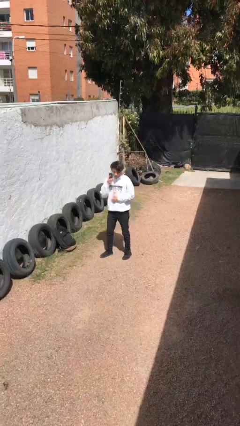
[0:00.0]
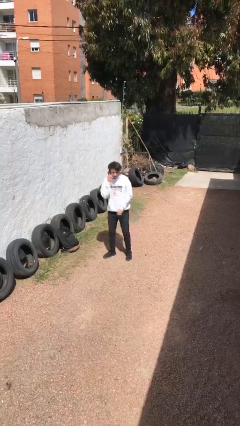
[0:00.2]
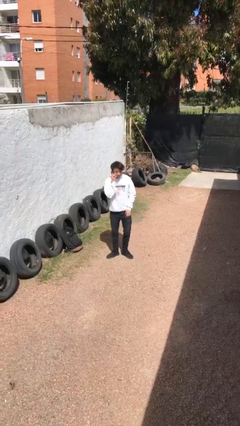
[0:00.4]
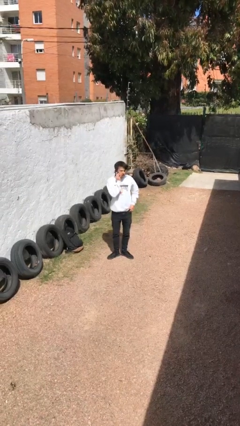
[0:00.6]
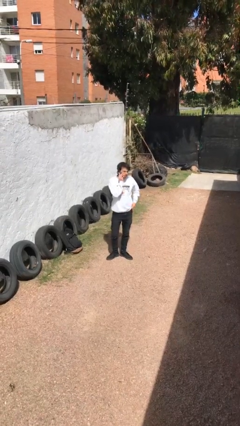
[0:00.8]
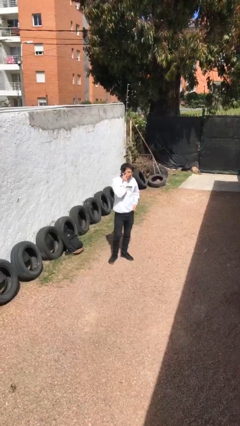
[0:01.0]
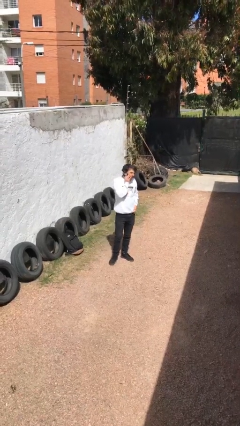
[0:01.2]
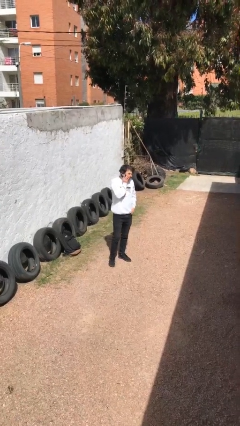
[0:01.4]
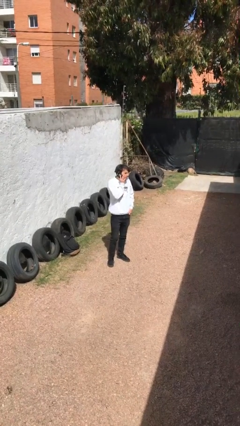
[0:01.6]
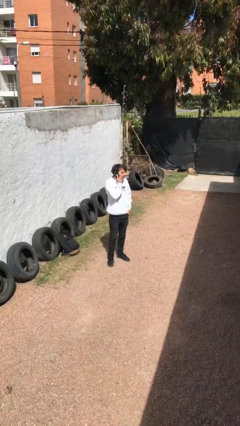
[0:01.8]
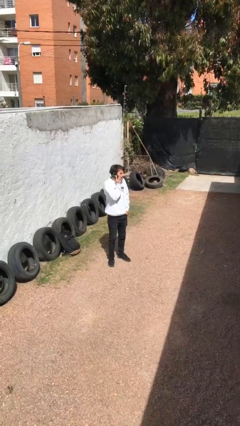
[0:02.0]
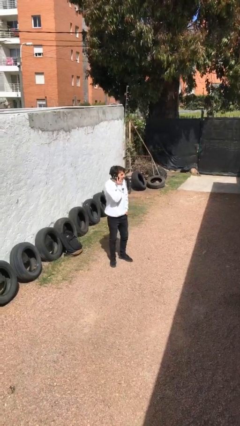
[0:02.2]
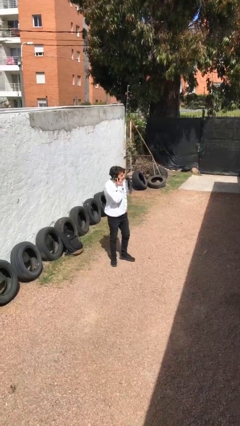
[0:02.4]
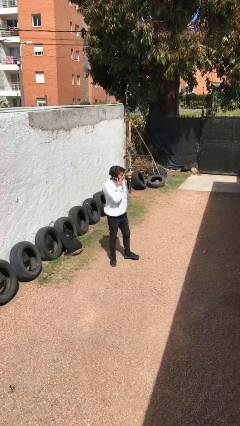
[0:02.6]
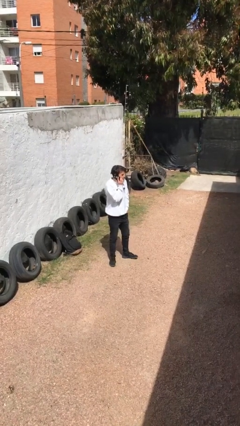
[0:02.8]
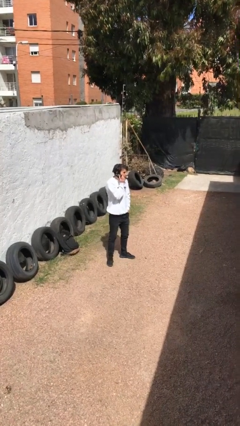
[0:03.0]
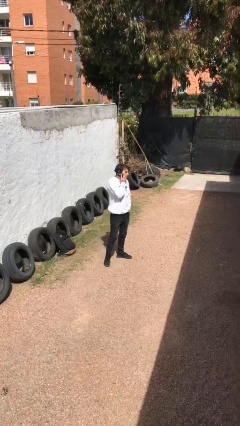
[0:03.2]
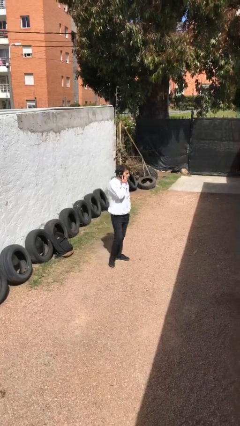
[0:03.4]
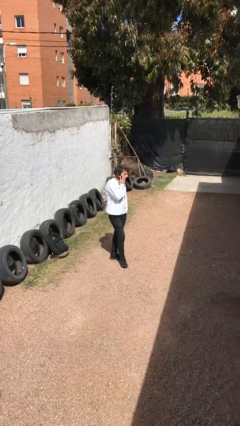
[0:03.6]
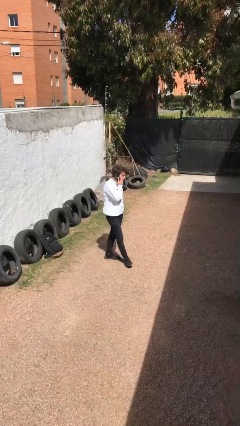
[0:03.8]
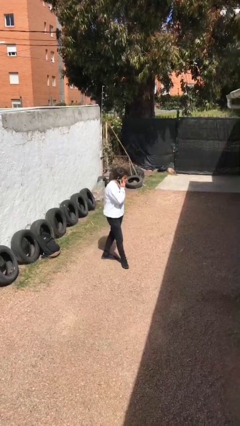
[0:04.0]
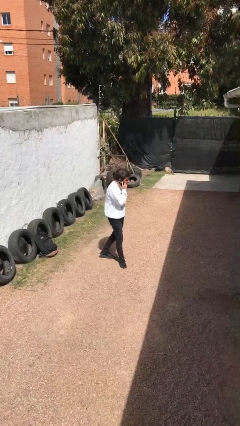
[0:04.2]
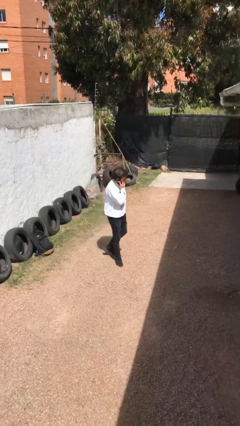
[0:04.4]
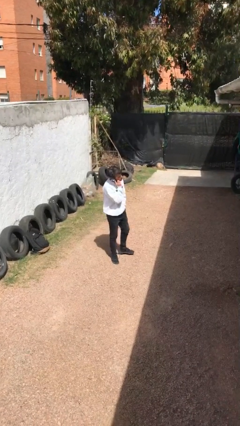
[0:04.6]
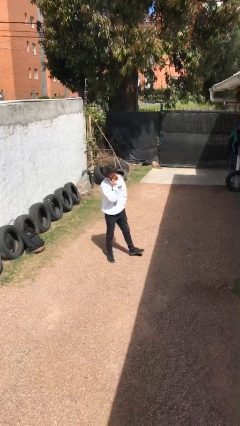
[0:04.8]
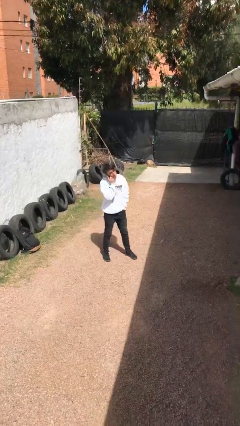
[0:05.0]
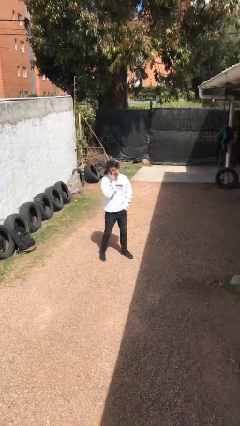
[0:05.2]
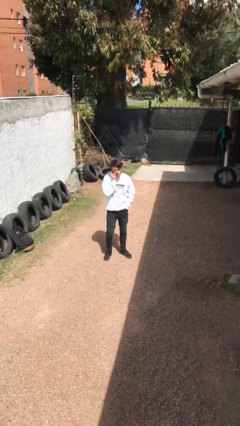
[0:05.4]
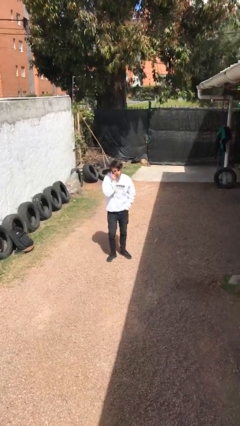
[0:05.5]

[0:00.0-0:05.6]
person talks on phone

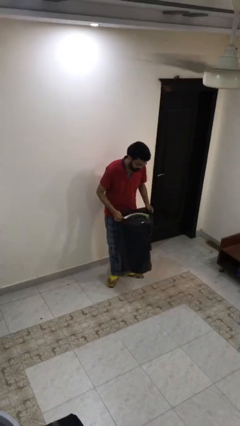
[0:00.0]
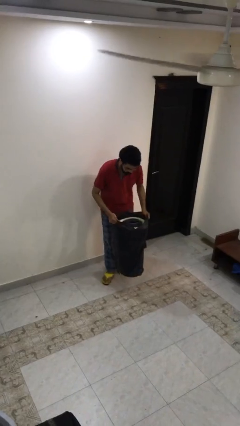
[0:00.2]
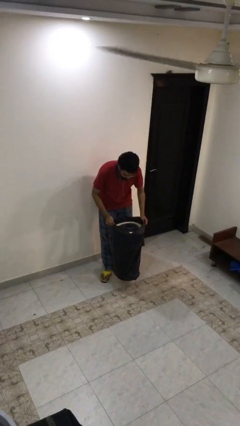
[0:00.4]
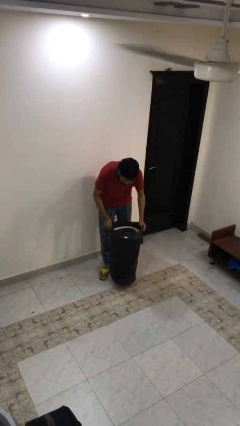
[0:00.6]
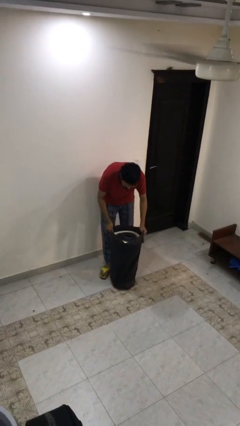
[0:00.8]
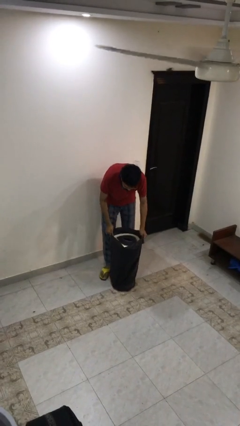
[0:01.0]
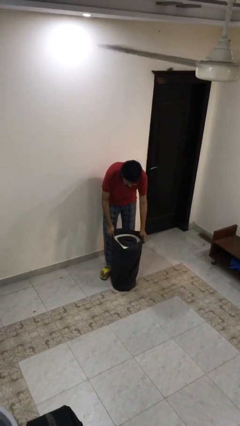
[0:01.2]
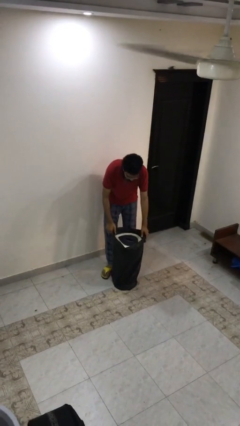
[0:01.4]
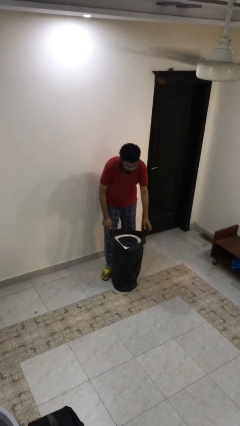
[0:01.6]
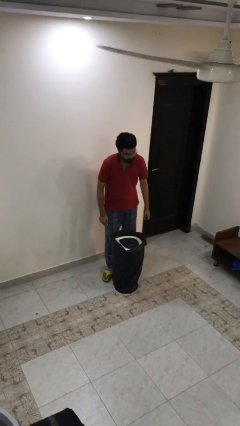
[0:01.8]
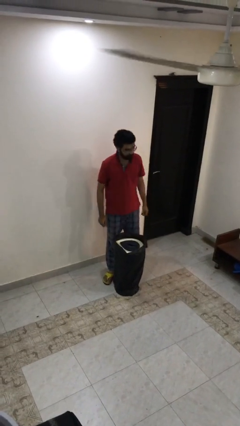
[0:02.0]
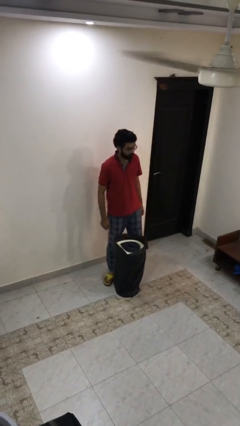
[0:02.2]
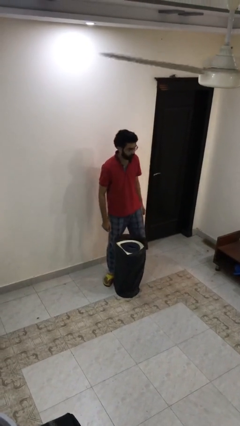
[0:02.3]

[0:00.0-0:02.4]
person puts down object on floor

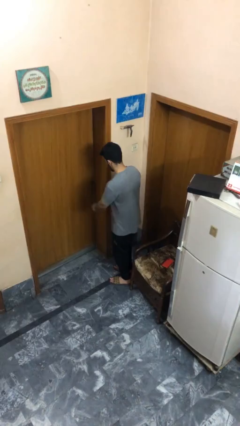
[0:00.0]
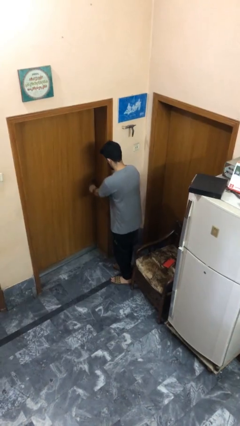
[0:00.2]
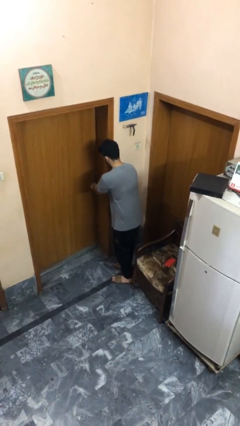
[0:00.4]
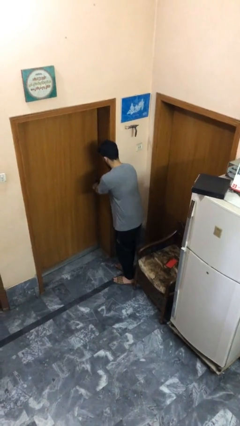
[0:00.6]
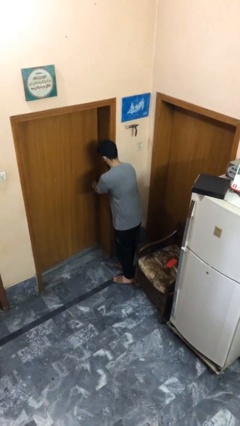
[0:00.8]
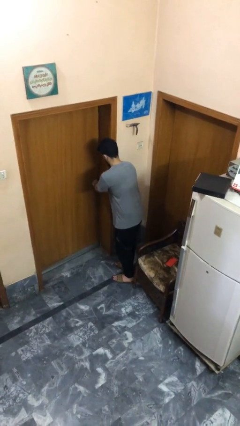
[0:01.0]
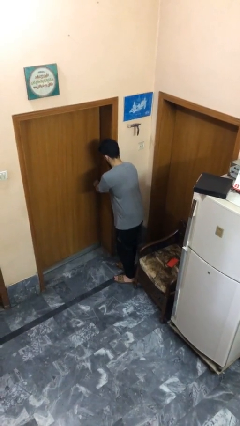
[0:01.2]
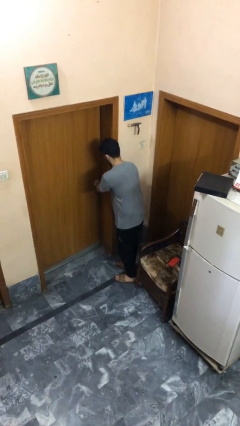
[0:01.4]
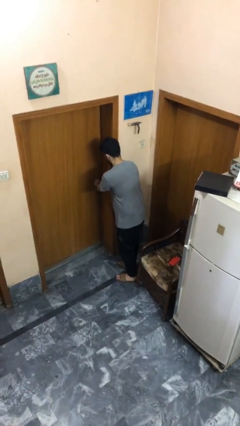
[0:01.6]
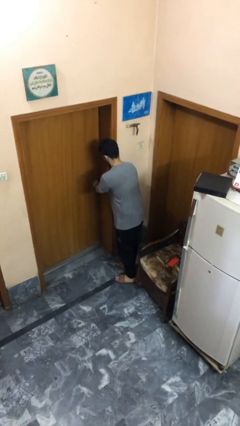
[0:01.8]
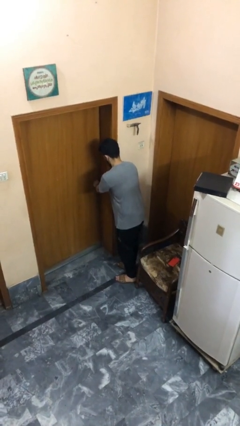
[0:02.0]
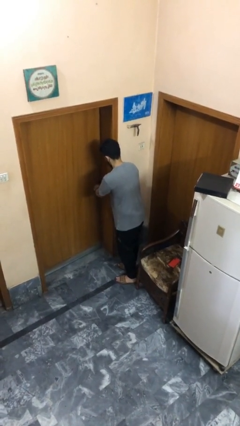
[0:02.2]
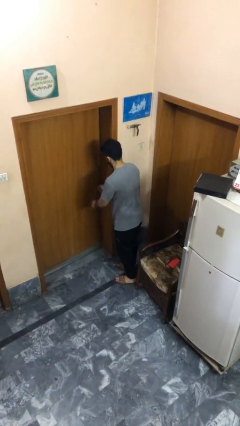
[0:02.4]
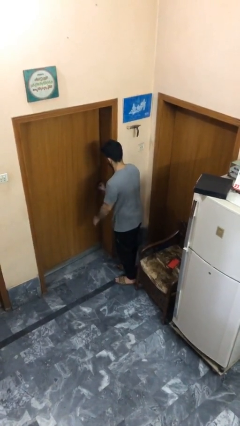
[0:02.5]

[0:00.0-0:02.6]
person unlocks door with keys

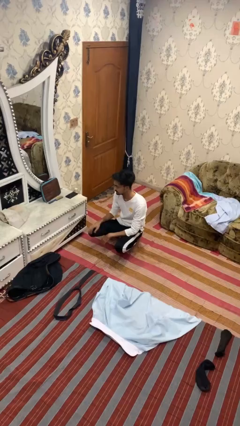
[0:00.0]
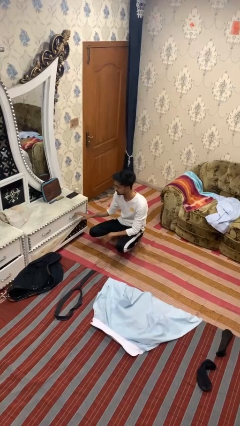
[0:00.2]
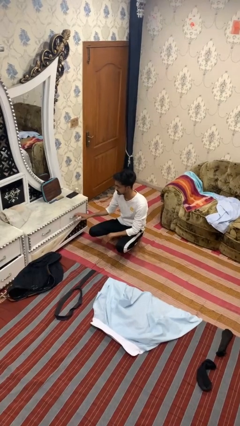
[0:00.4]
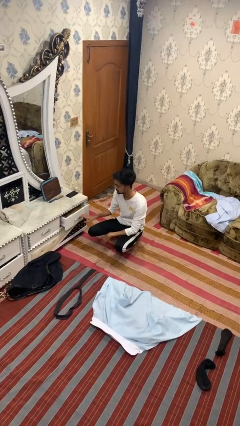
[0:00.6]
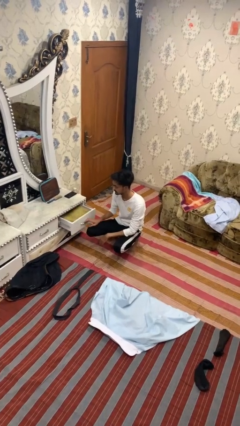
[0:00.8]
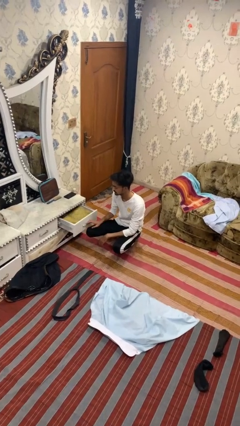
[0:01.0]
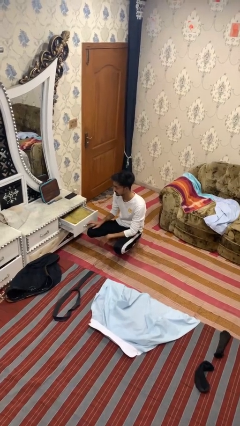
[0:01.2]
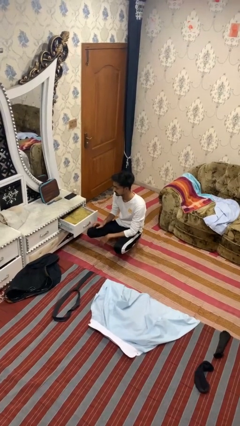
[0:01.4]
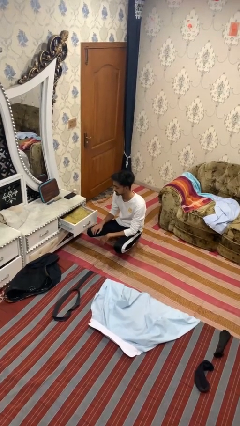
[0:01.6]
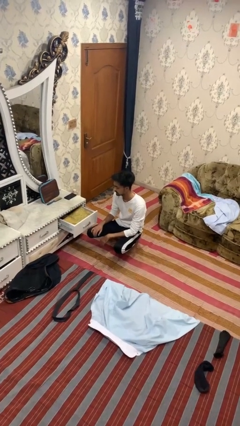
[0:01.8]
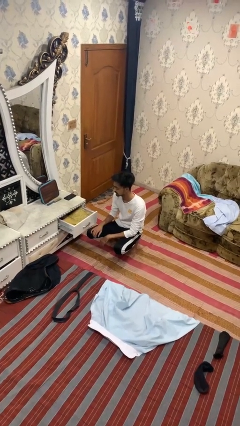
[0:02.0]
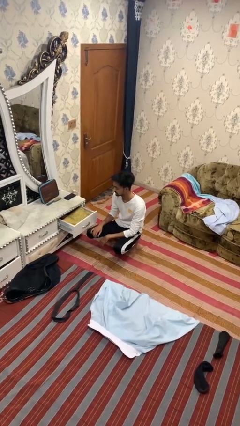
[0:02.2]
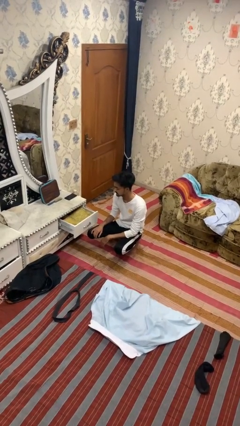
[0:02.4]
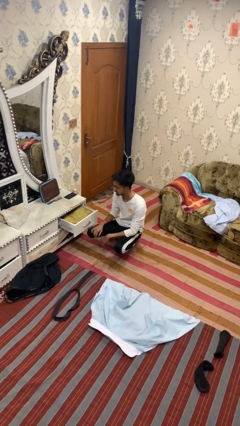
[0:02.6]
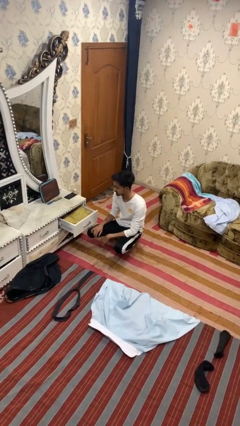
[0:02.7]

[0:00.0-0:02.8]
person opens dresser drawer

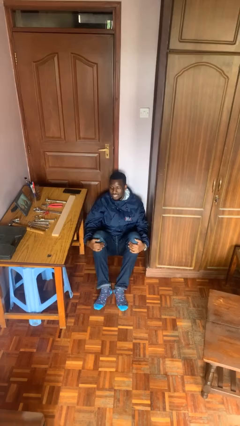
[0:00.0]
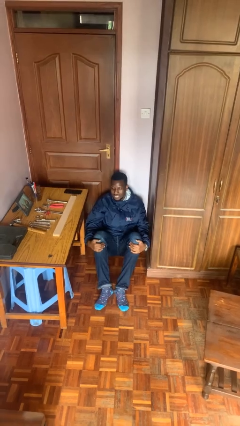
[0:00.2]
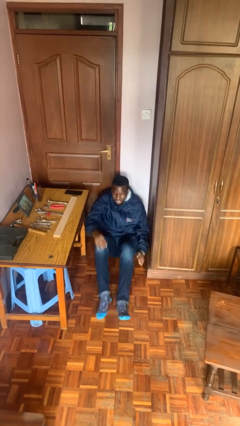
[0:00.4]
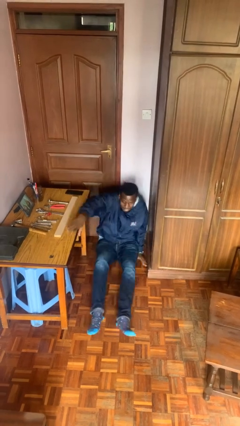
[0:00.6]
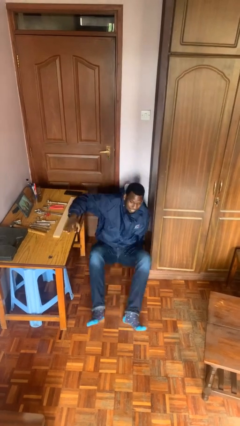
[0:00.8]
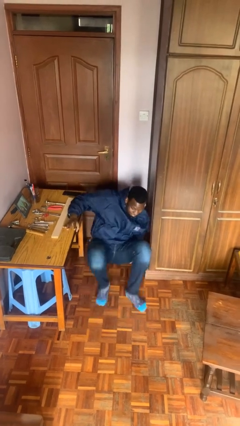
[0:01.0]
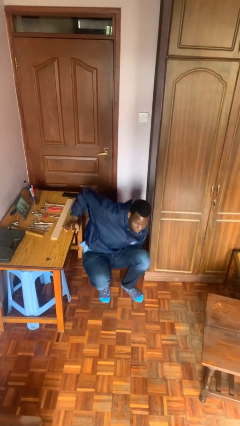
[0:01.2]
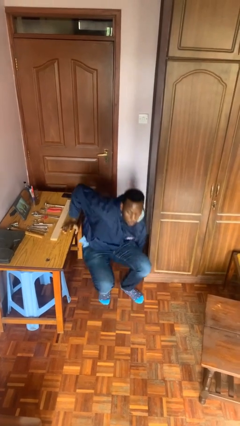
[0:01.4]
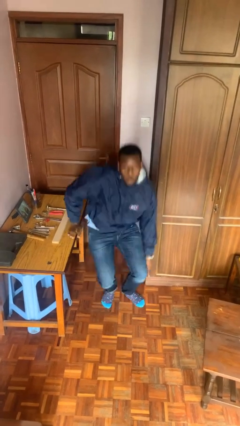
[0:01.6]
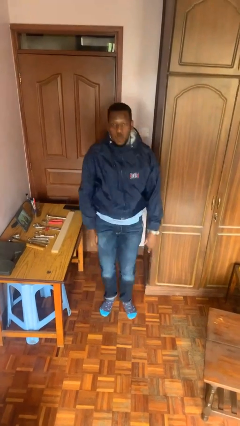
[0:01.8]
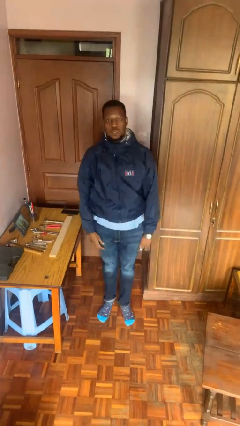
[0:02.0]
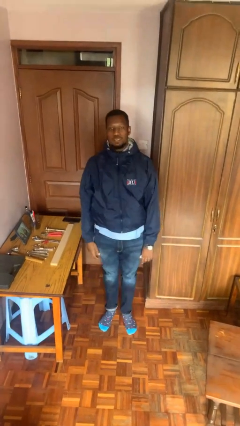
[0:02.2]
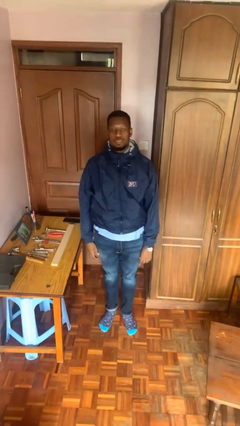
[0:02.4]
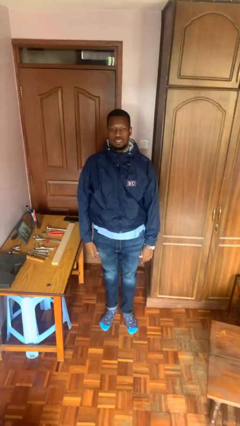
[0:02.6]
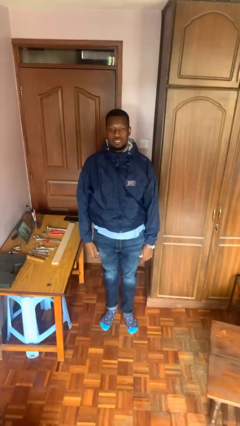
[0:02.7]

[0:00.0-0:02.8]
person stands up

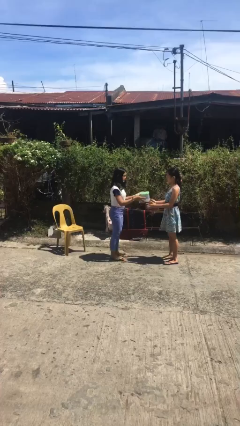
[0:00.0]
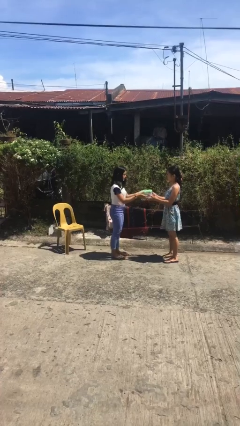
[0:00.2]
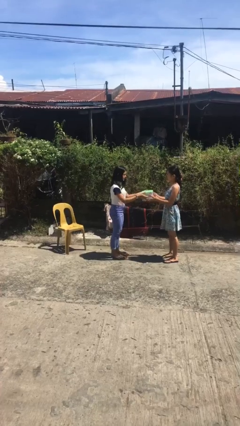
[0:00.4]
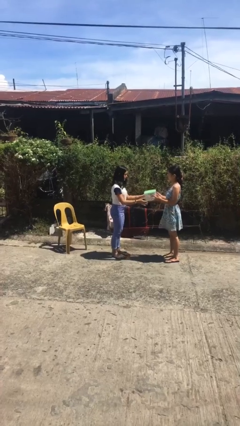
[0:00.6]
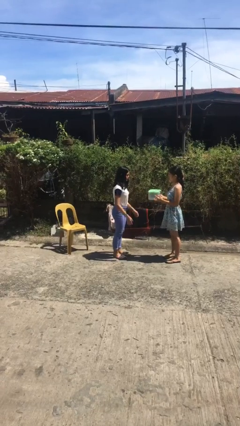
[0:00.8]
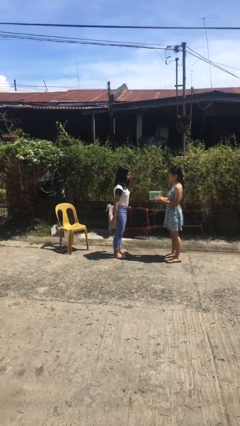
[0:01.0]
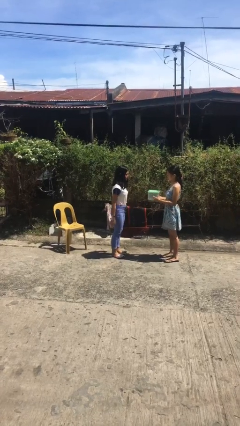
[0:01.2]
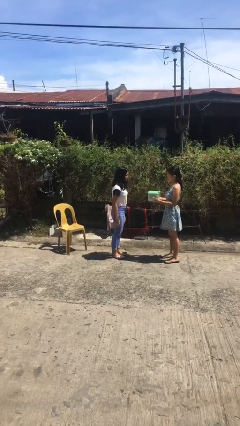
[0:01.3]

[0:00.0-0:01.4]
person transfers object to person
